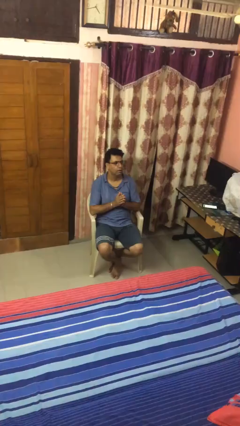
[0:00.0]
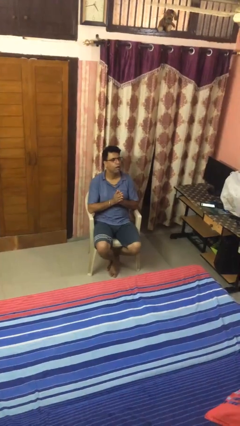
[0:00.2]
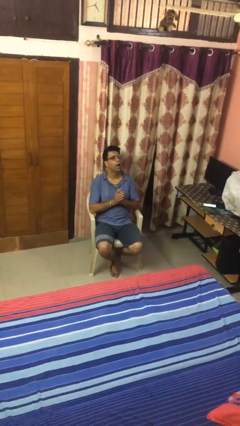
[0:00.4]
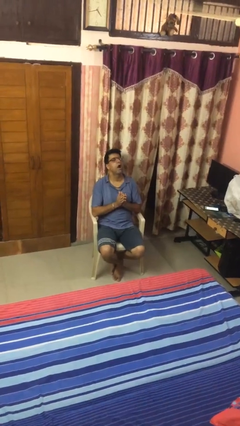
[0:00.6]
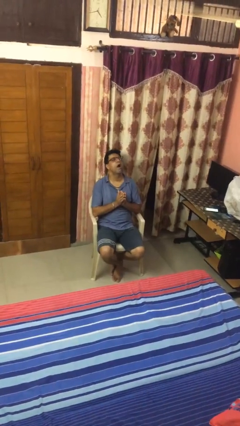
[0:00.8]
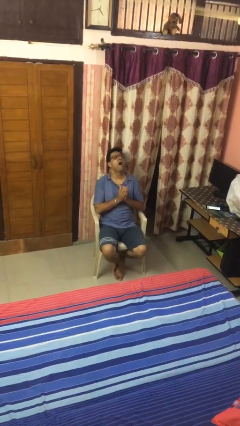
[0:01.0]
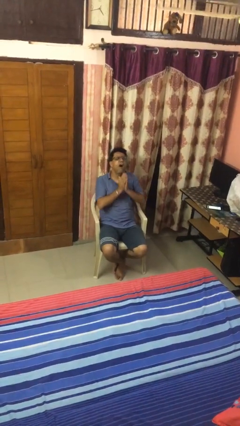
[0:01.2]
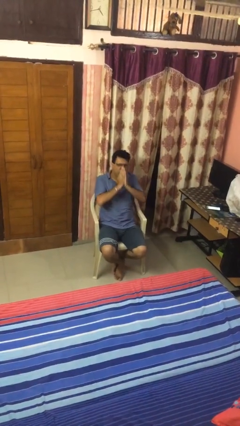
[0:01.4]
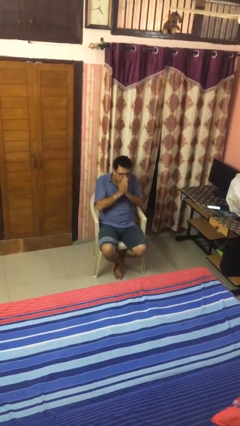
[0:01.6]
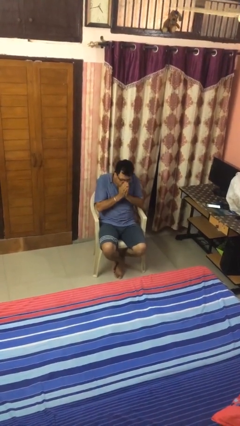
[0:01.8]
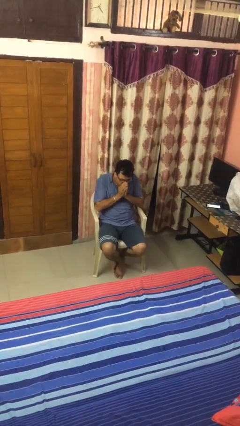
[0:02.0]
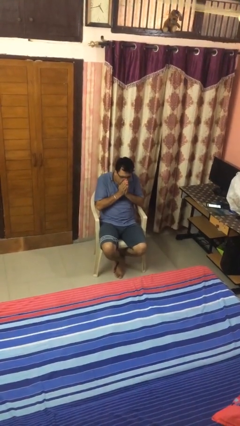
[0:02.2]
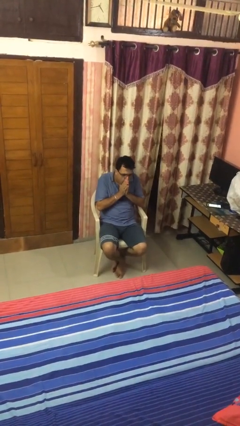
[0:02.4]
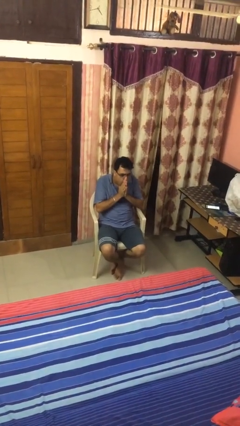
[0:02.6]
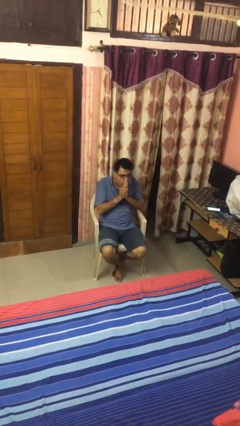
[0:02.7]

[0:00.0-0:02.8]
person sneezes into hand

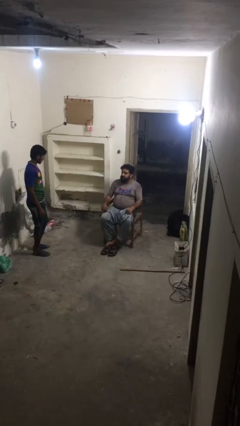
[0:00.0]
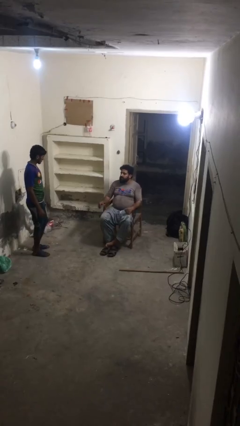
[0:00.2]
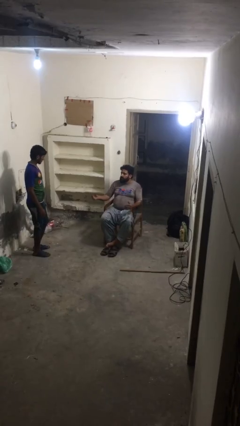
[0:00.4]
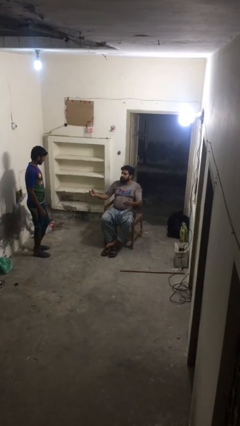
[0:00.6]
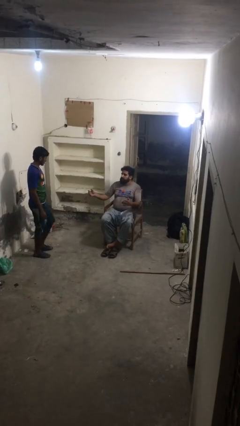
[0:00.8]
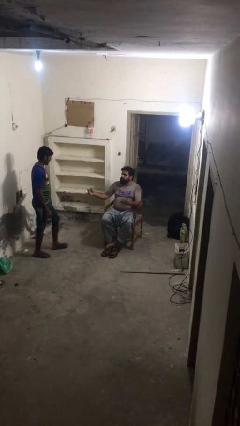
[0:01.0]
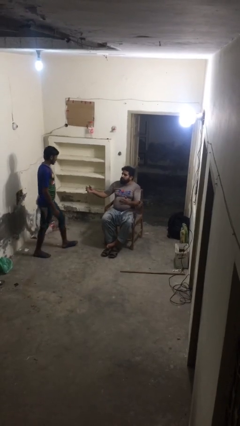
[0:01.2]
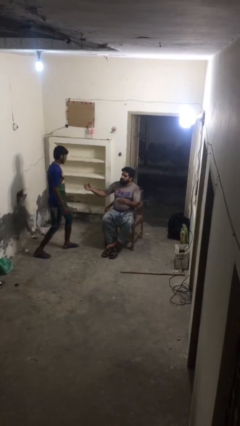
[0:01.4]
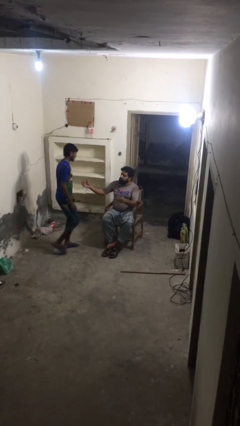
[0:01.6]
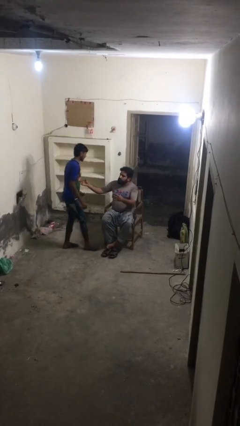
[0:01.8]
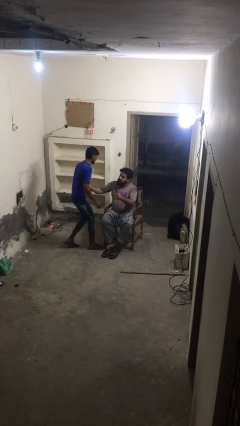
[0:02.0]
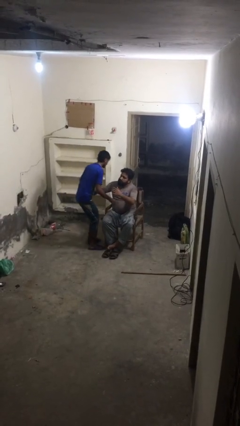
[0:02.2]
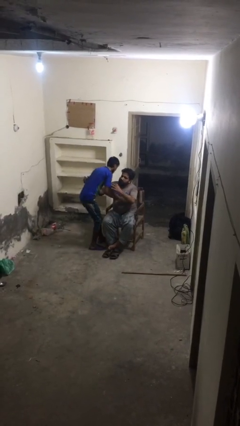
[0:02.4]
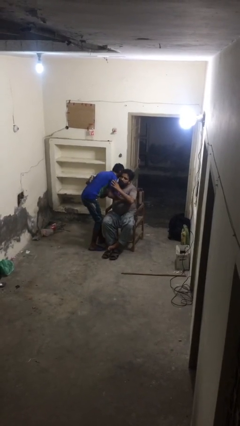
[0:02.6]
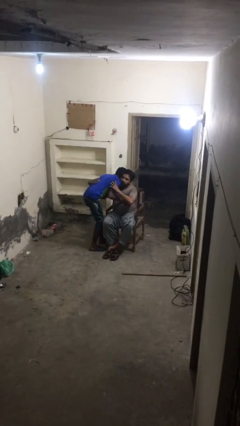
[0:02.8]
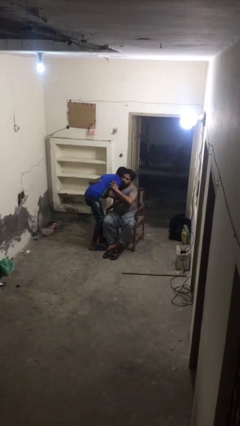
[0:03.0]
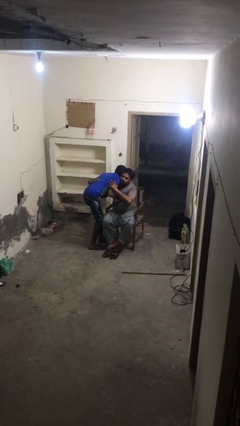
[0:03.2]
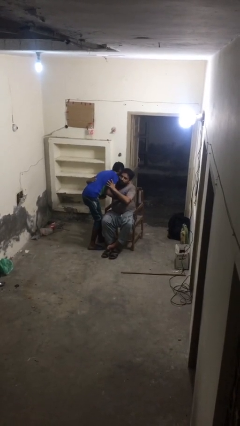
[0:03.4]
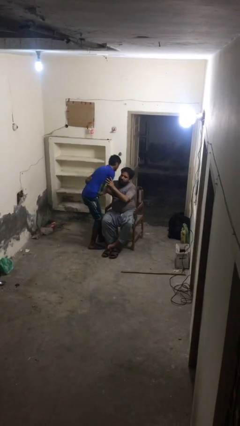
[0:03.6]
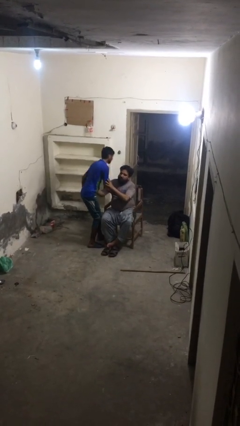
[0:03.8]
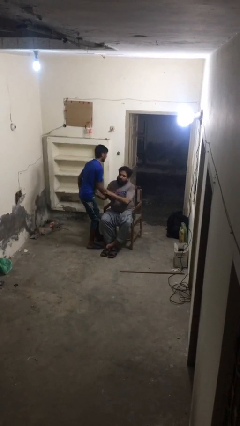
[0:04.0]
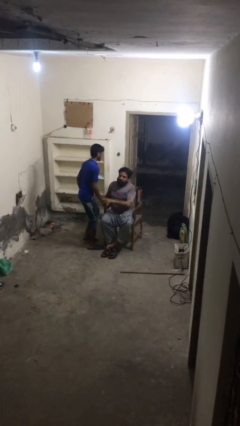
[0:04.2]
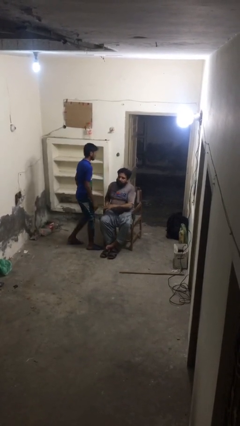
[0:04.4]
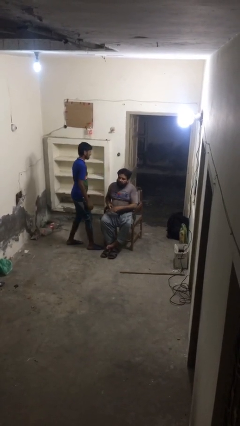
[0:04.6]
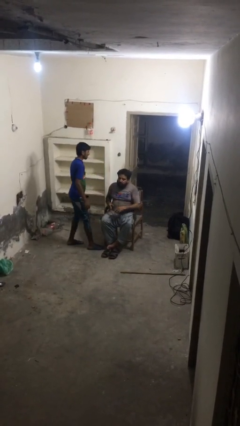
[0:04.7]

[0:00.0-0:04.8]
person embraces person

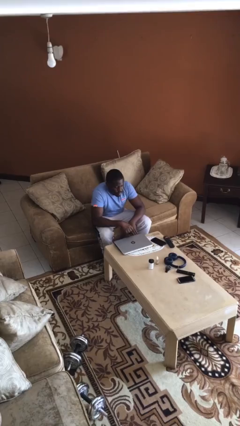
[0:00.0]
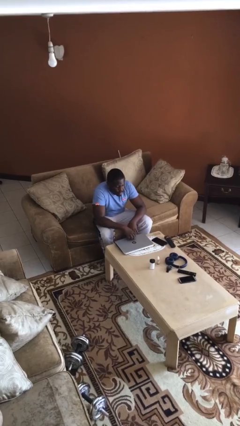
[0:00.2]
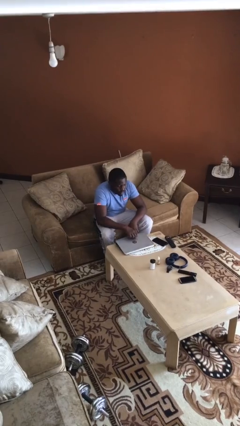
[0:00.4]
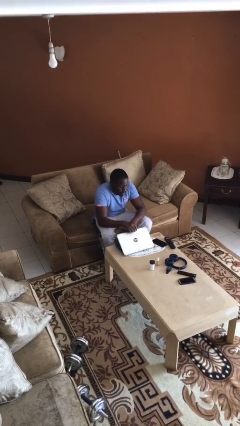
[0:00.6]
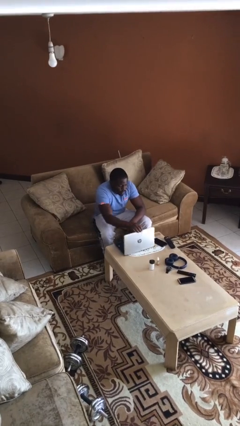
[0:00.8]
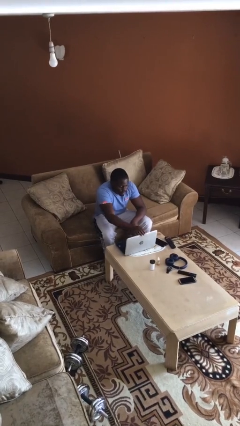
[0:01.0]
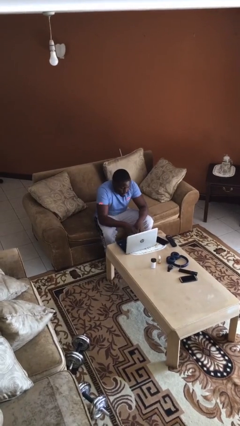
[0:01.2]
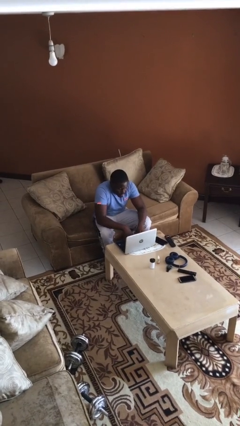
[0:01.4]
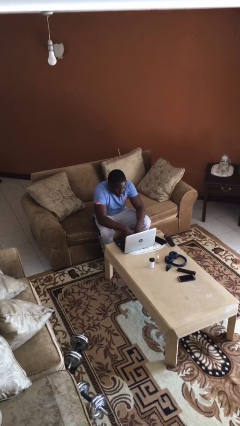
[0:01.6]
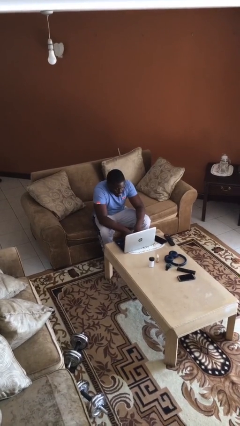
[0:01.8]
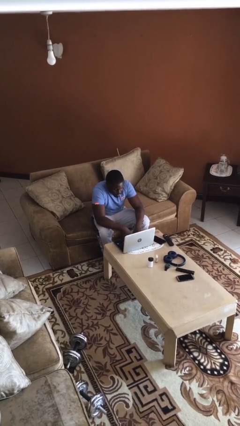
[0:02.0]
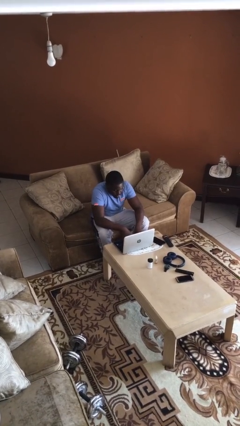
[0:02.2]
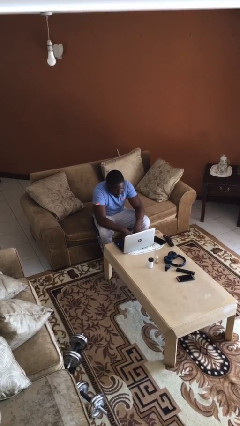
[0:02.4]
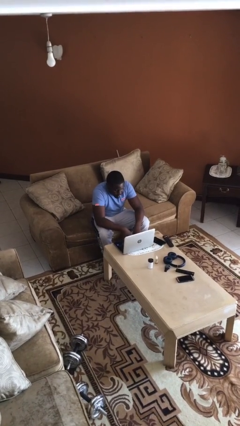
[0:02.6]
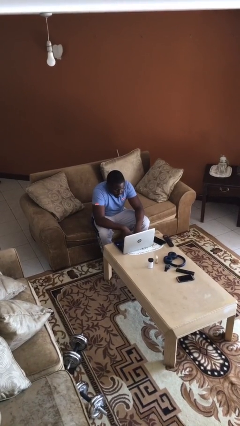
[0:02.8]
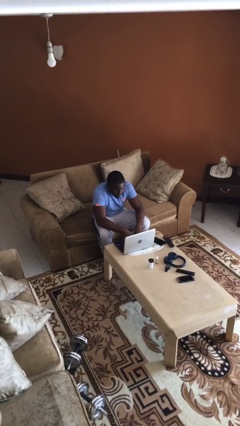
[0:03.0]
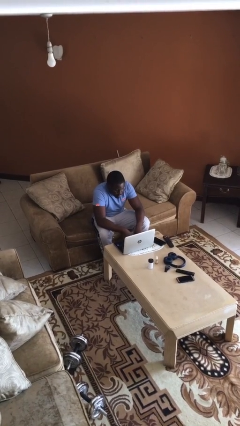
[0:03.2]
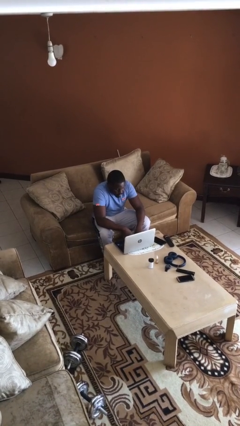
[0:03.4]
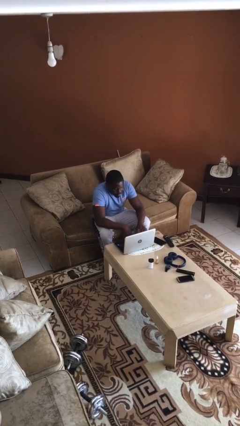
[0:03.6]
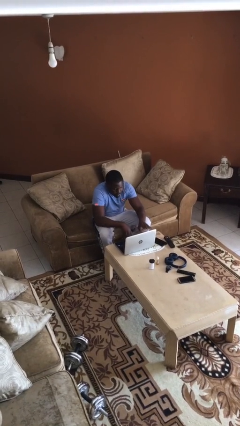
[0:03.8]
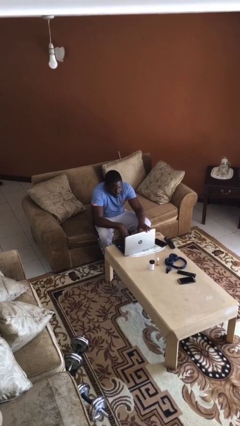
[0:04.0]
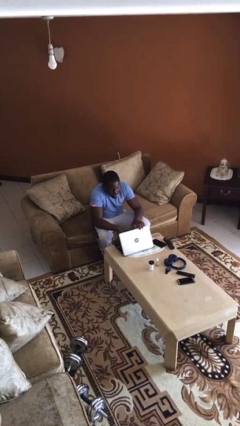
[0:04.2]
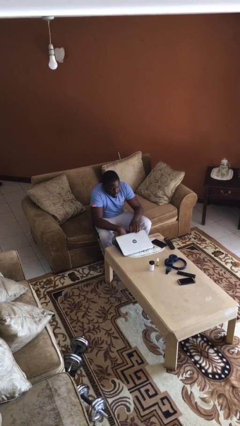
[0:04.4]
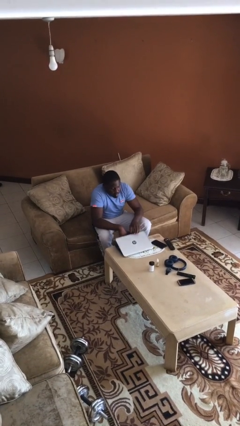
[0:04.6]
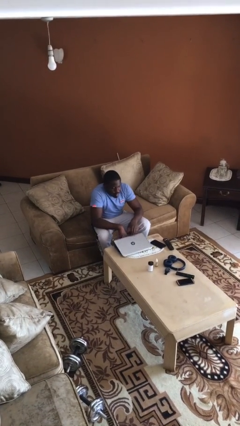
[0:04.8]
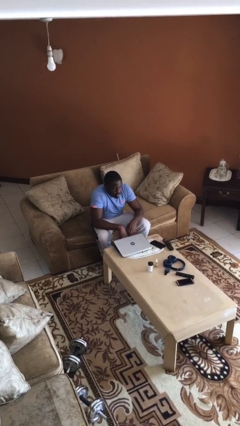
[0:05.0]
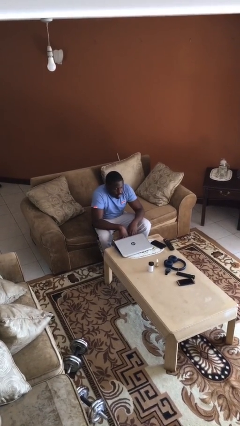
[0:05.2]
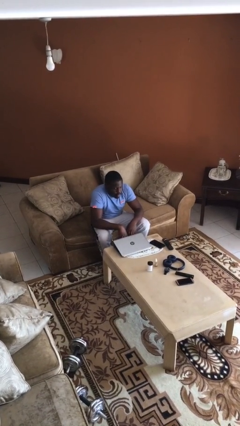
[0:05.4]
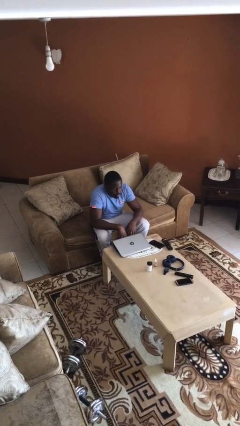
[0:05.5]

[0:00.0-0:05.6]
person interacts with laptop

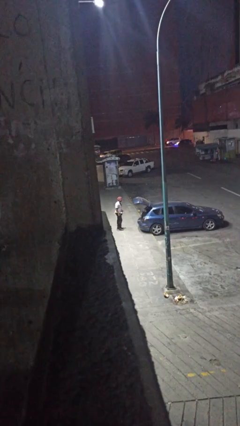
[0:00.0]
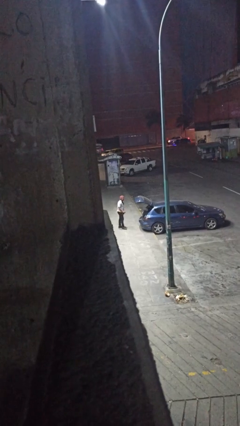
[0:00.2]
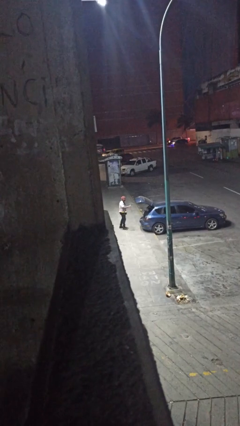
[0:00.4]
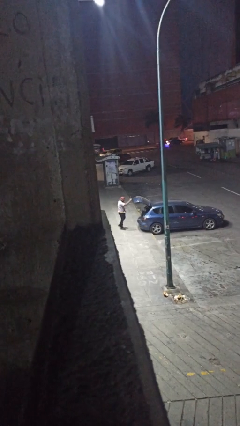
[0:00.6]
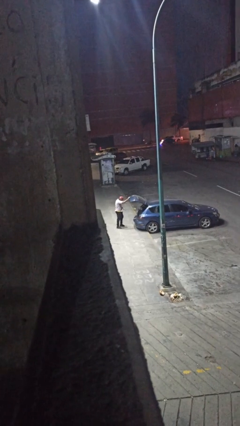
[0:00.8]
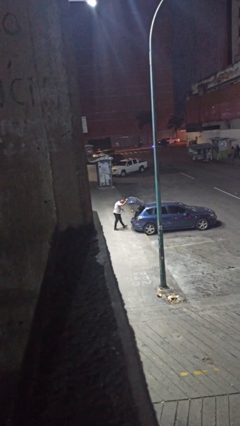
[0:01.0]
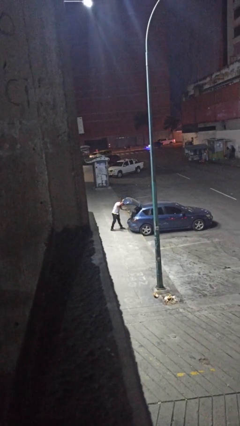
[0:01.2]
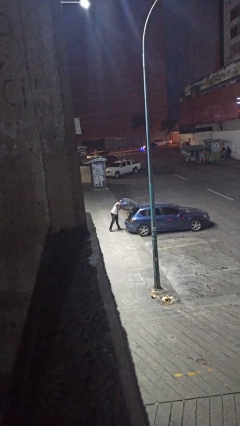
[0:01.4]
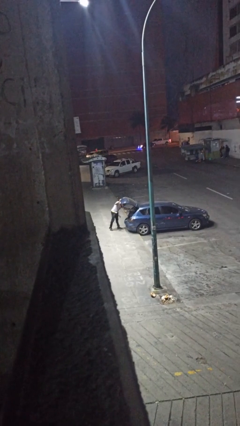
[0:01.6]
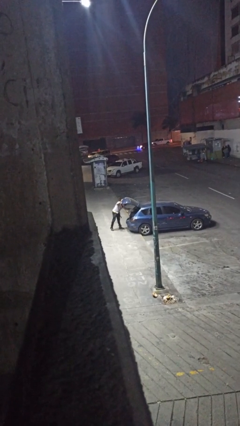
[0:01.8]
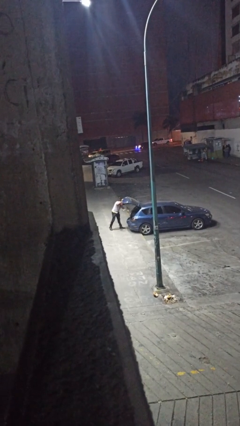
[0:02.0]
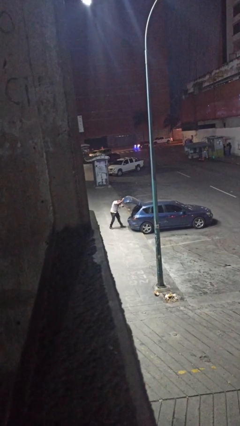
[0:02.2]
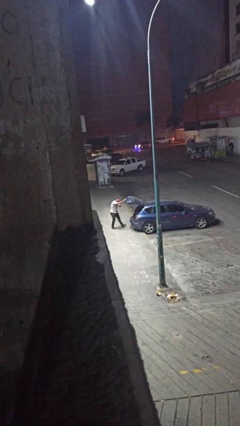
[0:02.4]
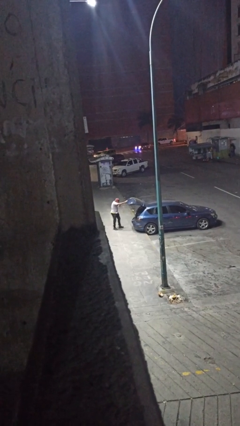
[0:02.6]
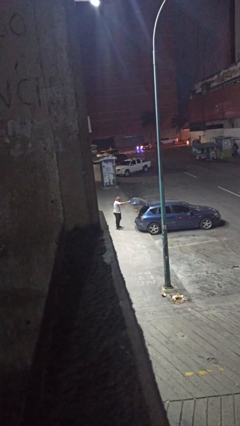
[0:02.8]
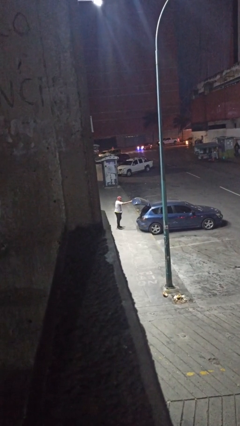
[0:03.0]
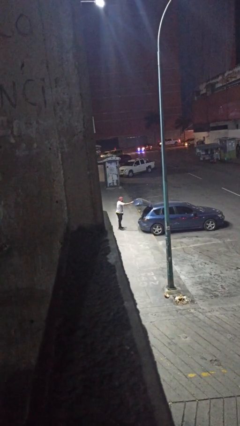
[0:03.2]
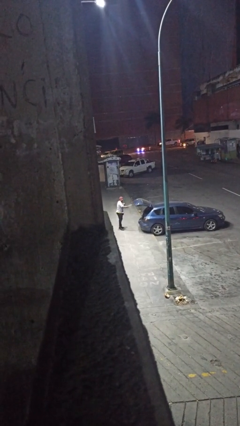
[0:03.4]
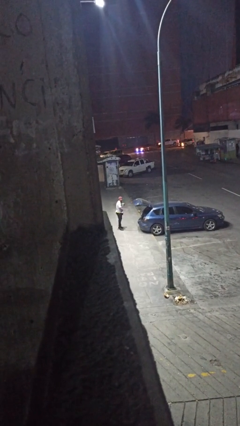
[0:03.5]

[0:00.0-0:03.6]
person unloads car

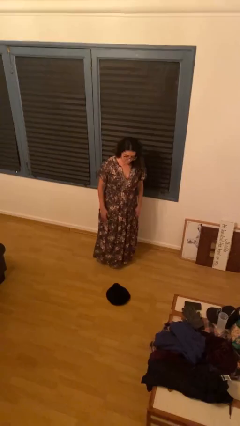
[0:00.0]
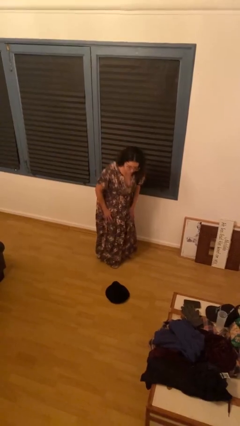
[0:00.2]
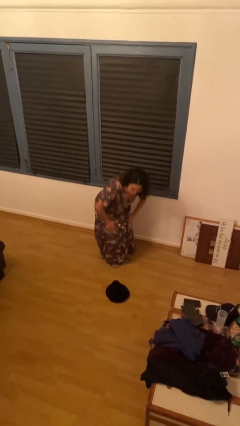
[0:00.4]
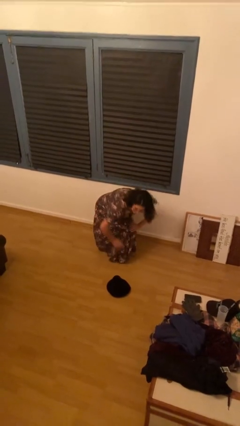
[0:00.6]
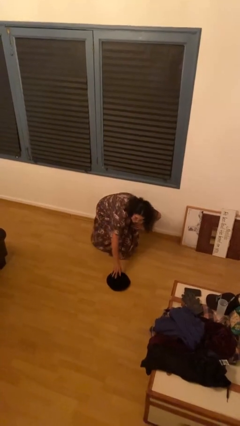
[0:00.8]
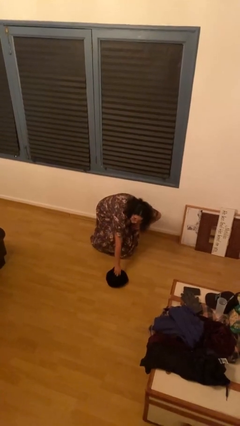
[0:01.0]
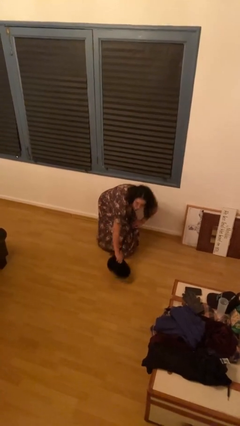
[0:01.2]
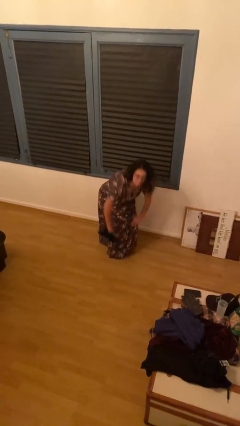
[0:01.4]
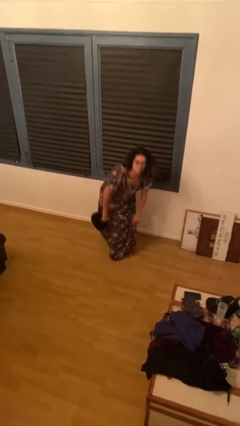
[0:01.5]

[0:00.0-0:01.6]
person picks up object from floor
